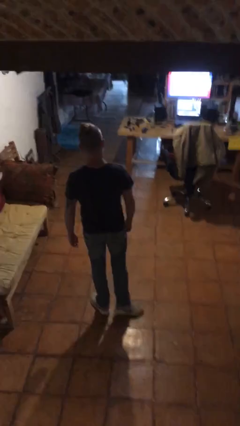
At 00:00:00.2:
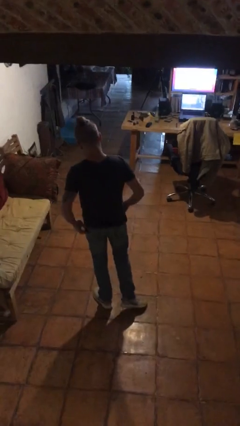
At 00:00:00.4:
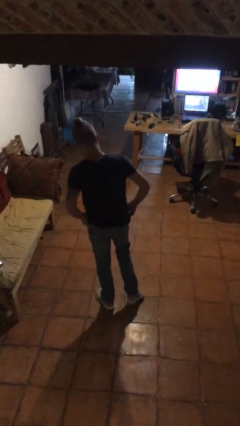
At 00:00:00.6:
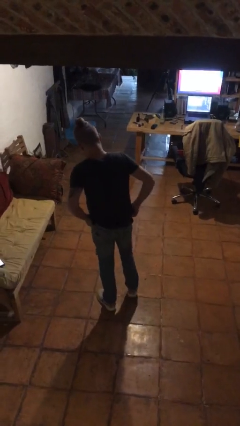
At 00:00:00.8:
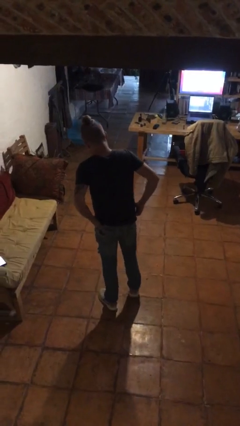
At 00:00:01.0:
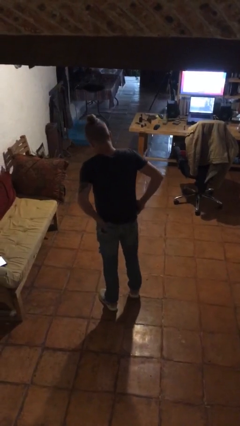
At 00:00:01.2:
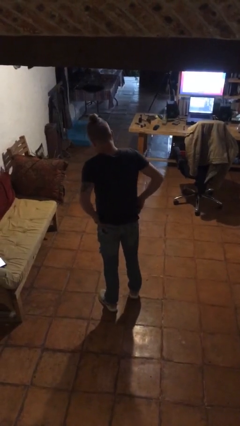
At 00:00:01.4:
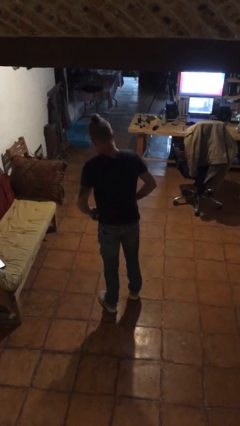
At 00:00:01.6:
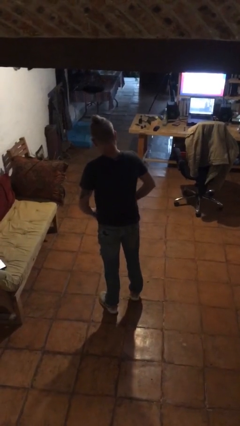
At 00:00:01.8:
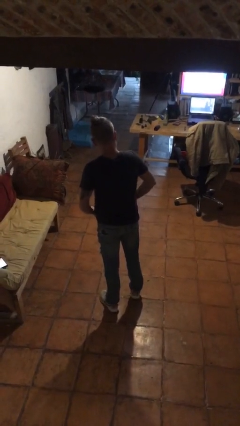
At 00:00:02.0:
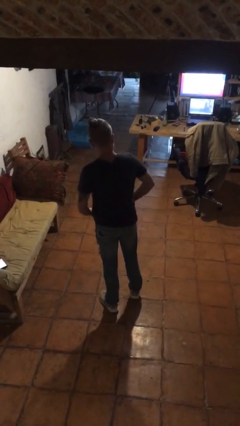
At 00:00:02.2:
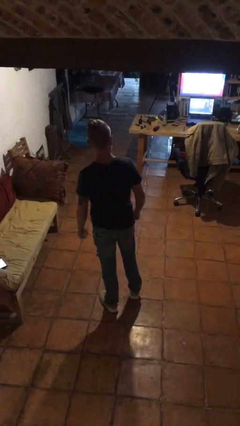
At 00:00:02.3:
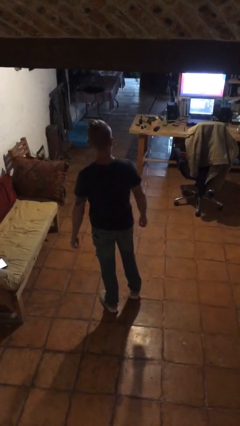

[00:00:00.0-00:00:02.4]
person hikes up pants

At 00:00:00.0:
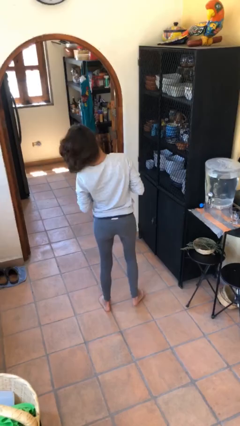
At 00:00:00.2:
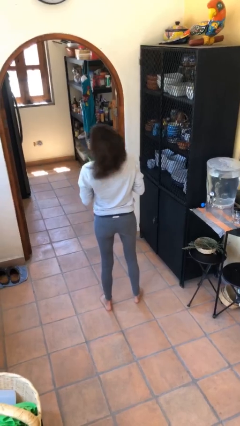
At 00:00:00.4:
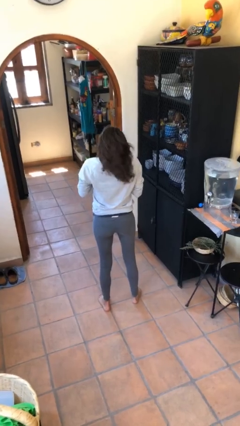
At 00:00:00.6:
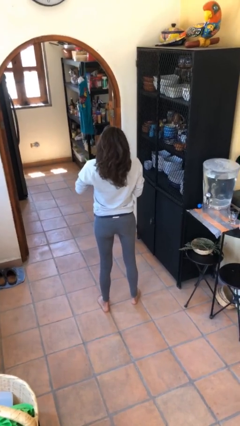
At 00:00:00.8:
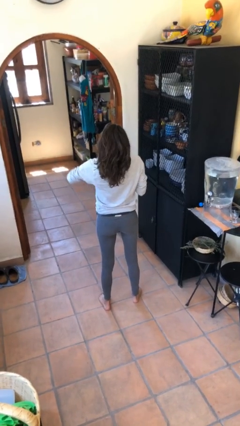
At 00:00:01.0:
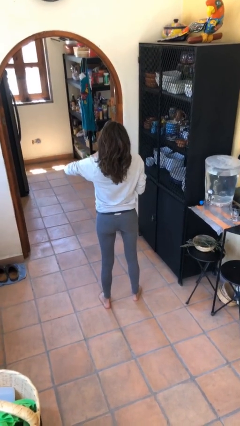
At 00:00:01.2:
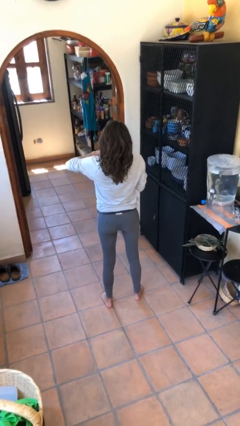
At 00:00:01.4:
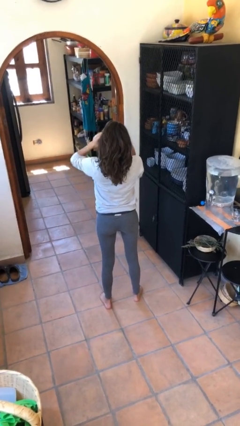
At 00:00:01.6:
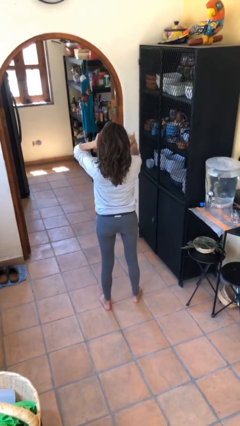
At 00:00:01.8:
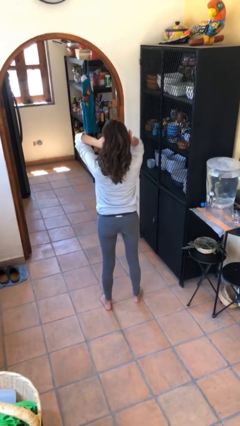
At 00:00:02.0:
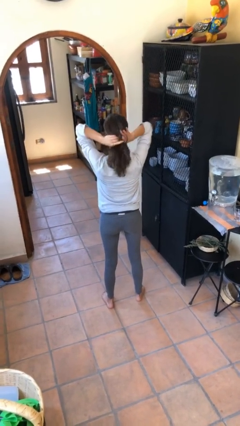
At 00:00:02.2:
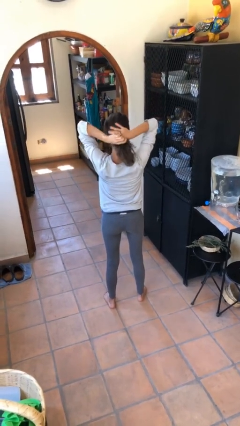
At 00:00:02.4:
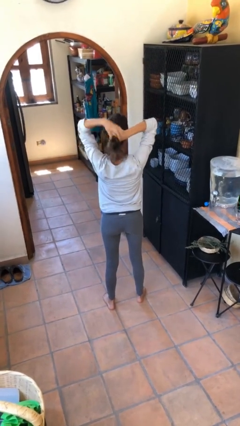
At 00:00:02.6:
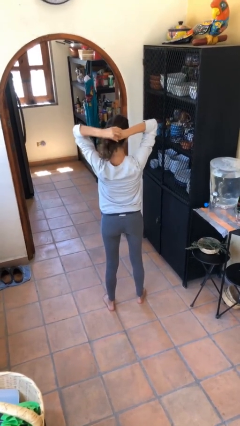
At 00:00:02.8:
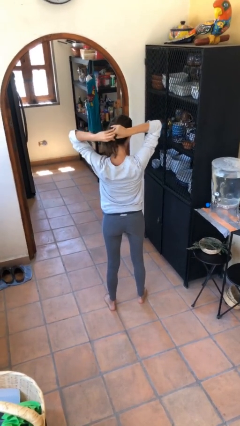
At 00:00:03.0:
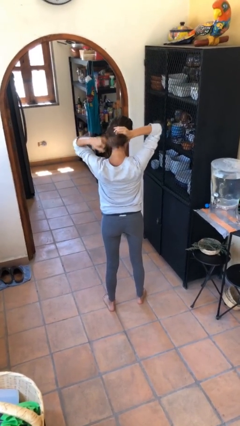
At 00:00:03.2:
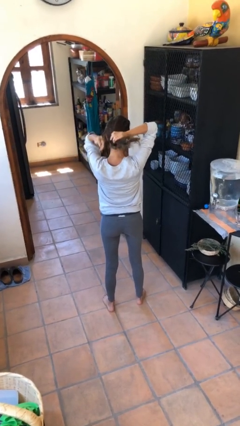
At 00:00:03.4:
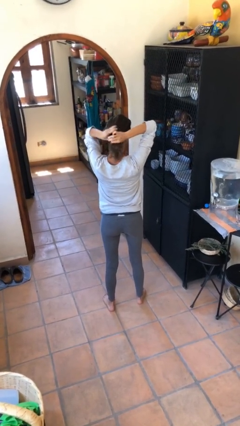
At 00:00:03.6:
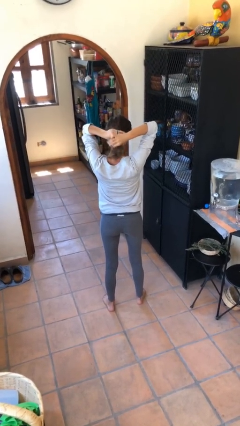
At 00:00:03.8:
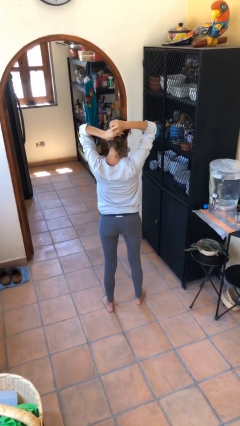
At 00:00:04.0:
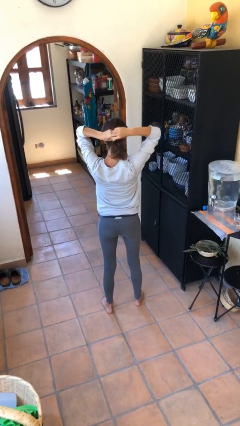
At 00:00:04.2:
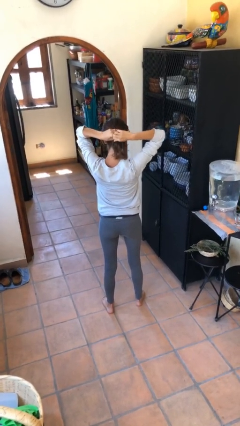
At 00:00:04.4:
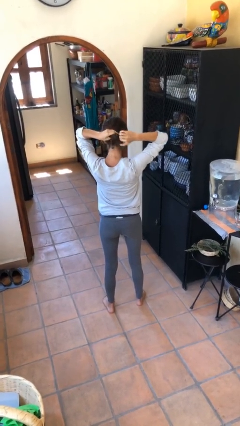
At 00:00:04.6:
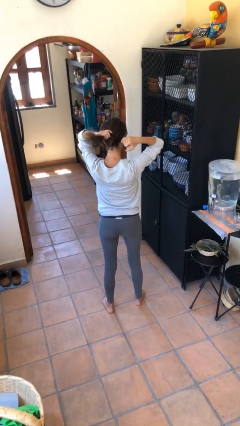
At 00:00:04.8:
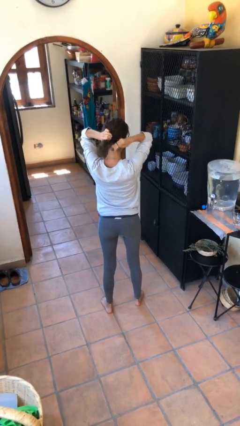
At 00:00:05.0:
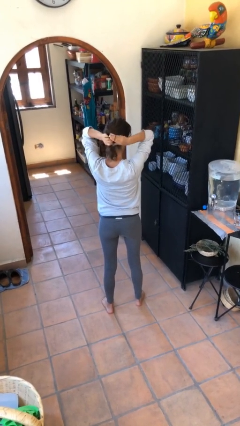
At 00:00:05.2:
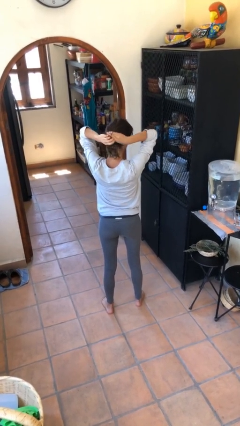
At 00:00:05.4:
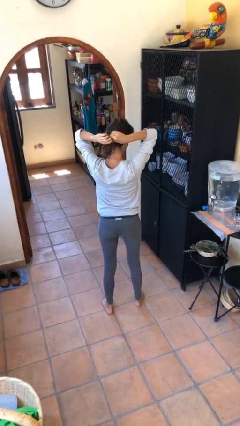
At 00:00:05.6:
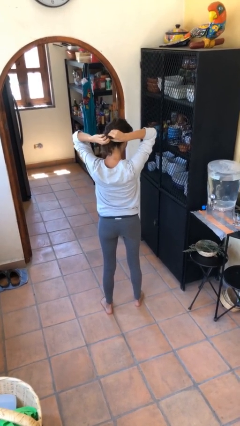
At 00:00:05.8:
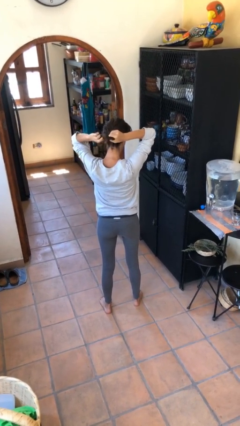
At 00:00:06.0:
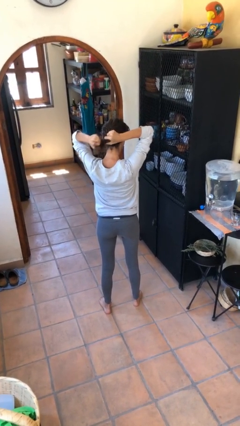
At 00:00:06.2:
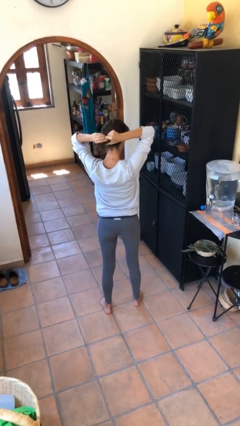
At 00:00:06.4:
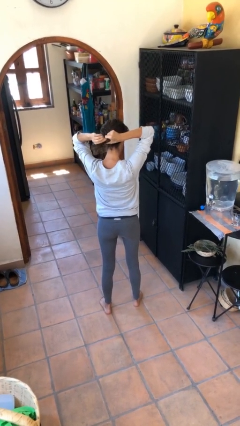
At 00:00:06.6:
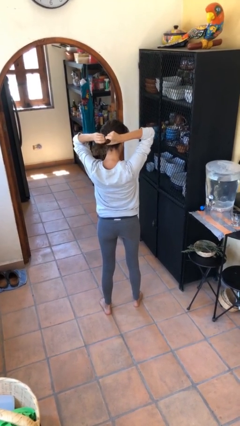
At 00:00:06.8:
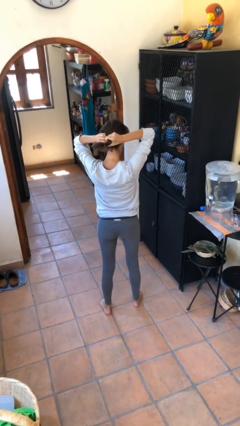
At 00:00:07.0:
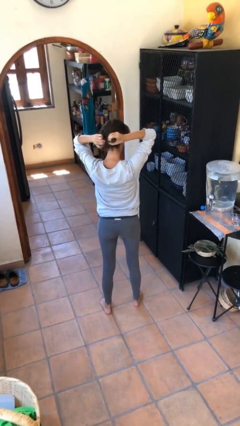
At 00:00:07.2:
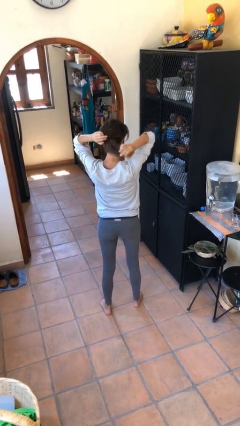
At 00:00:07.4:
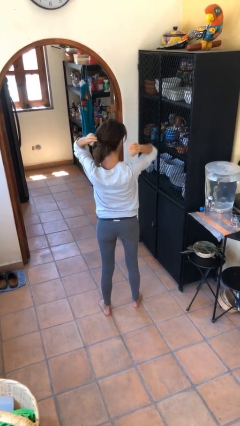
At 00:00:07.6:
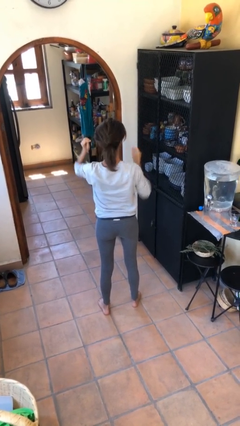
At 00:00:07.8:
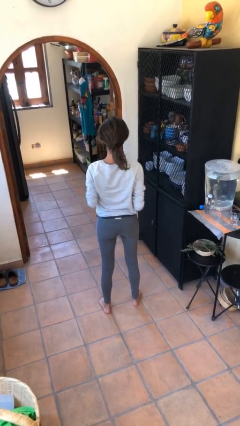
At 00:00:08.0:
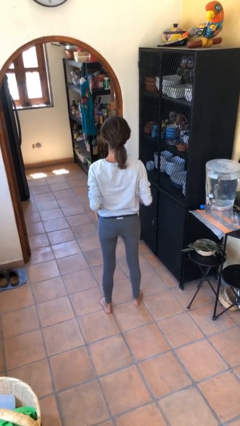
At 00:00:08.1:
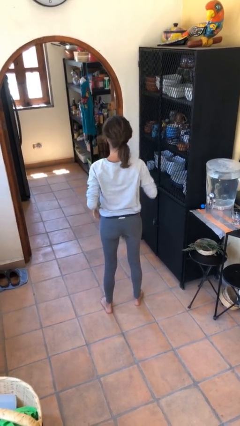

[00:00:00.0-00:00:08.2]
person puts hair in ponytail

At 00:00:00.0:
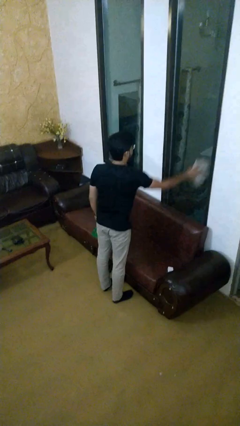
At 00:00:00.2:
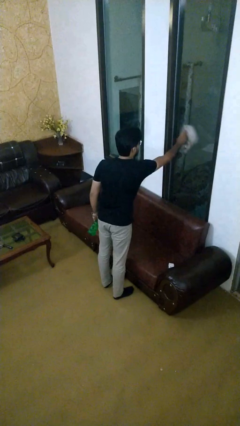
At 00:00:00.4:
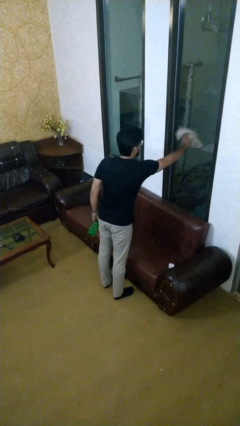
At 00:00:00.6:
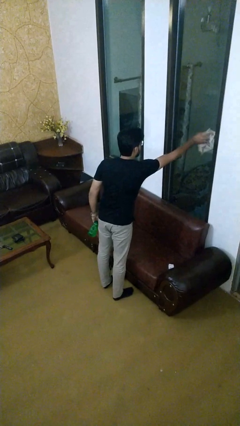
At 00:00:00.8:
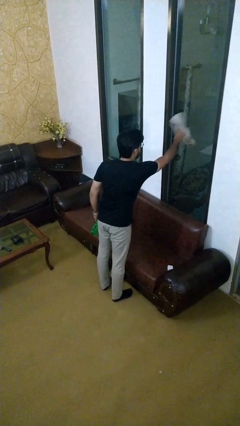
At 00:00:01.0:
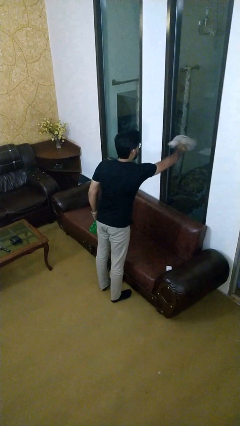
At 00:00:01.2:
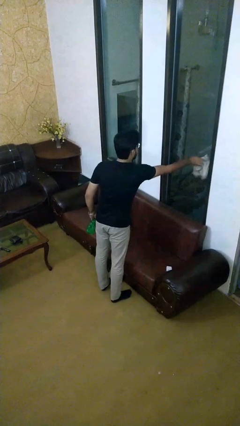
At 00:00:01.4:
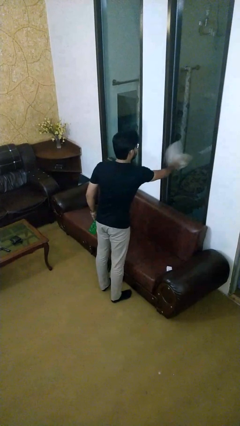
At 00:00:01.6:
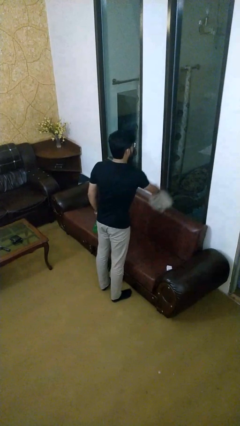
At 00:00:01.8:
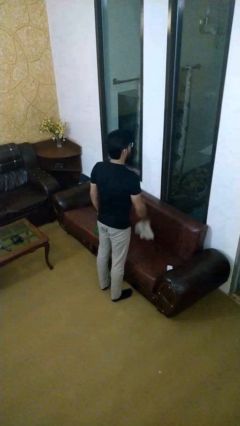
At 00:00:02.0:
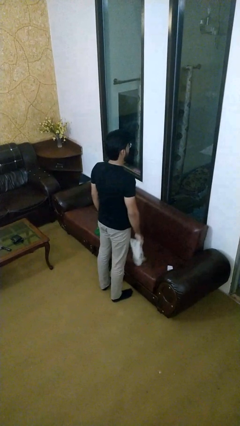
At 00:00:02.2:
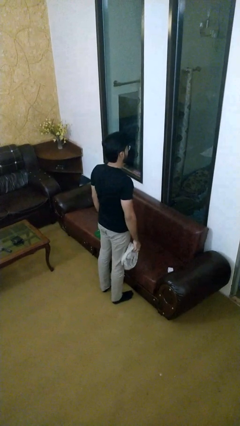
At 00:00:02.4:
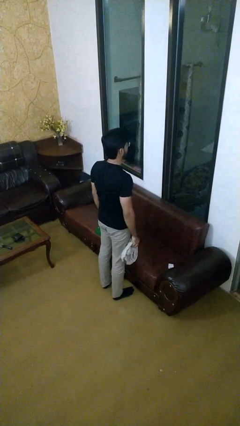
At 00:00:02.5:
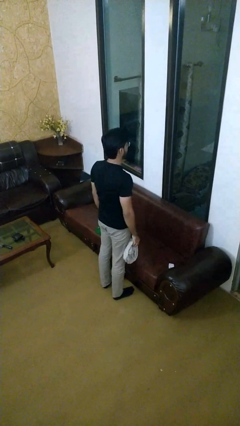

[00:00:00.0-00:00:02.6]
person washes window

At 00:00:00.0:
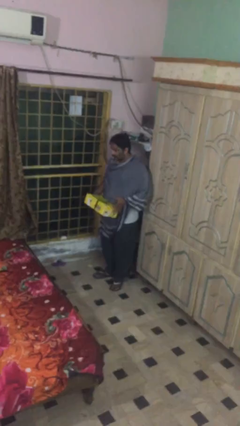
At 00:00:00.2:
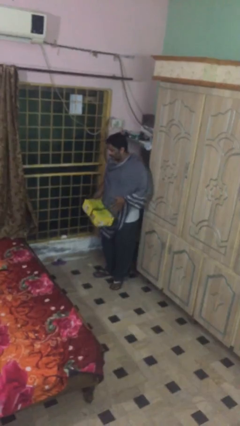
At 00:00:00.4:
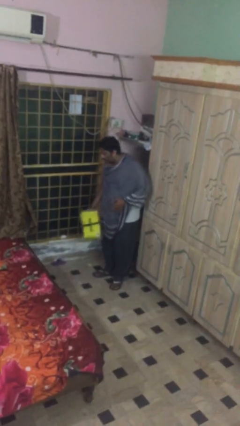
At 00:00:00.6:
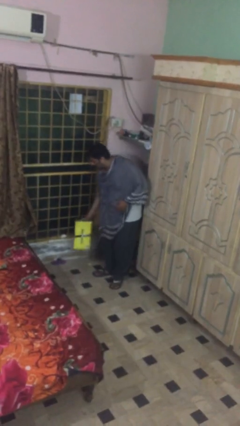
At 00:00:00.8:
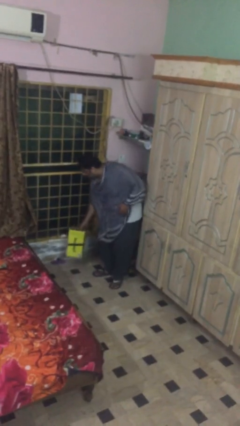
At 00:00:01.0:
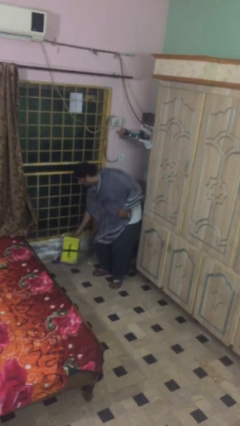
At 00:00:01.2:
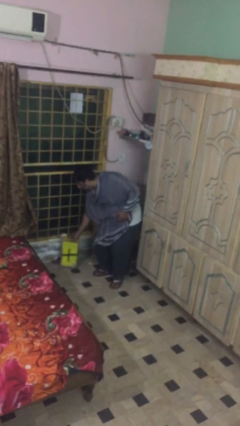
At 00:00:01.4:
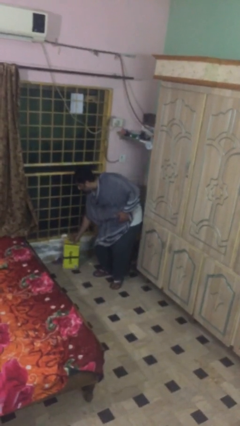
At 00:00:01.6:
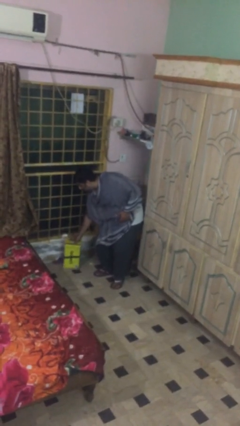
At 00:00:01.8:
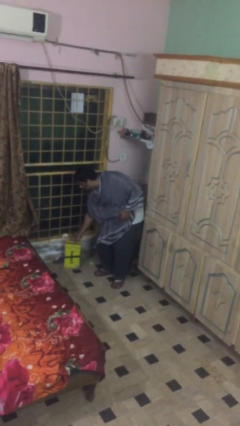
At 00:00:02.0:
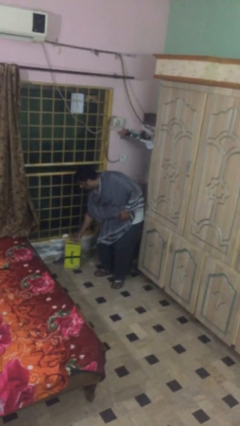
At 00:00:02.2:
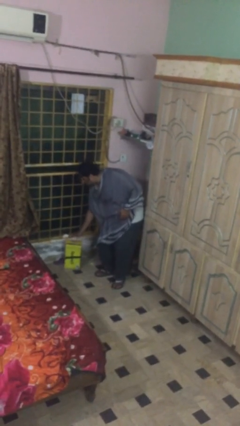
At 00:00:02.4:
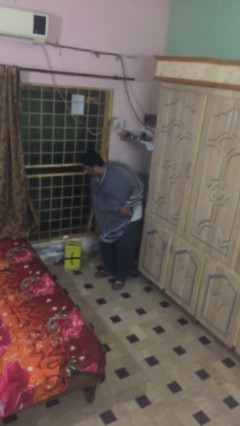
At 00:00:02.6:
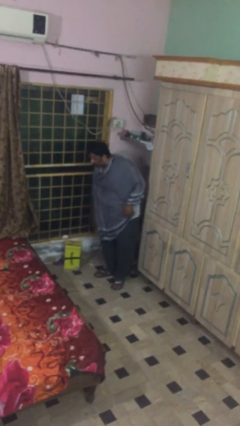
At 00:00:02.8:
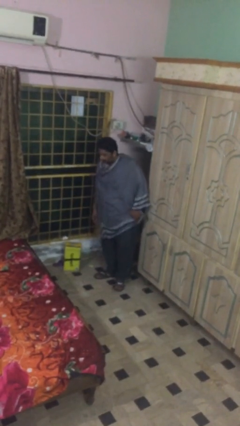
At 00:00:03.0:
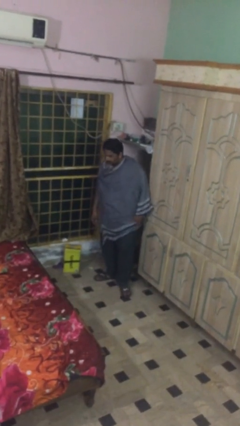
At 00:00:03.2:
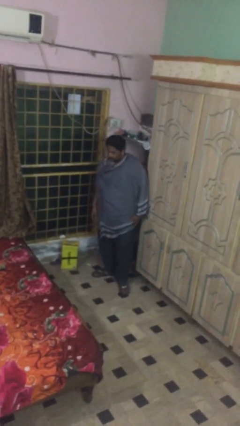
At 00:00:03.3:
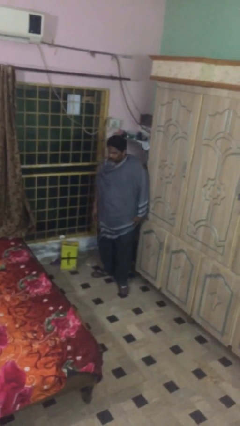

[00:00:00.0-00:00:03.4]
person puts down object on floor

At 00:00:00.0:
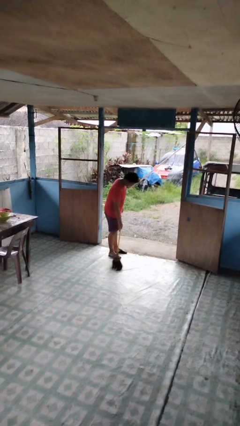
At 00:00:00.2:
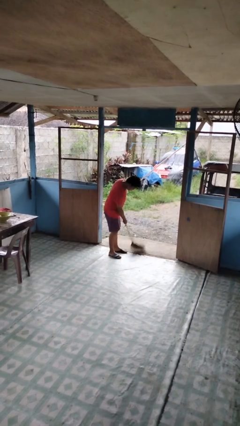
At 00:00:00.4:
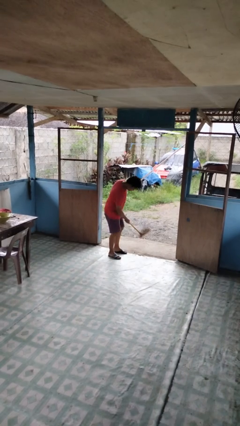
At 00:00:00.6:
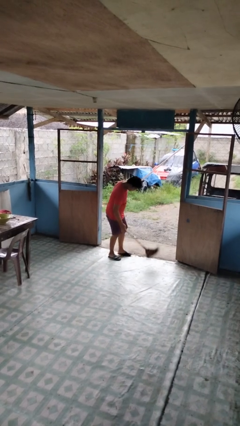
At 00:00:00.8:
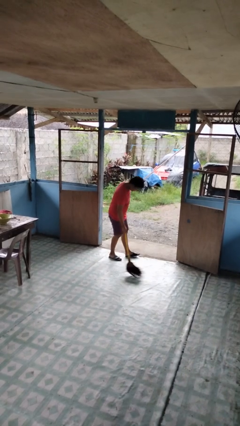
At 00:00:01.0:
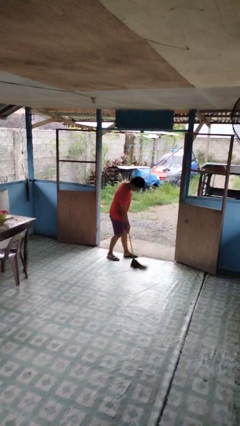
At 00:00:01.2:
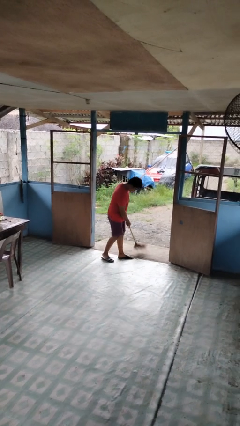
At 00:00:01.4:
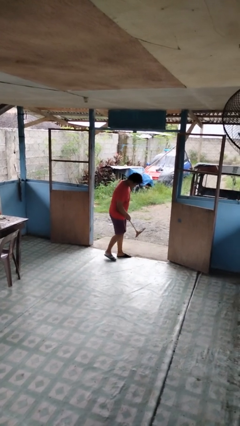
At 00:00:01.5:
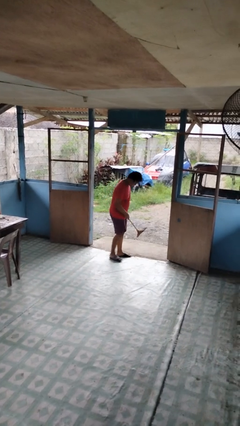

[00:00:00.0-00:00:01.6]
person sweeps floor
